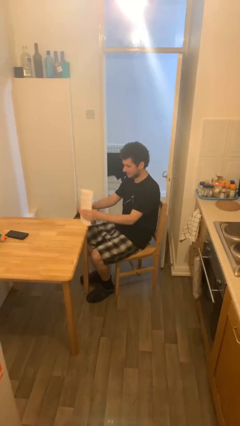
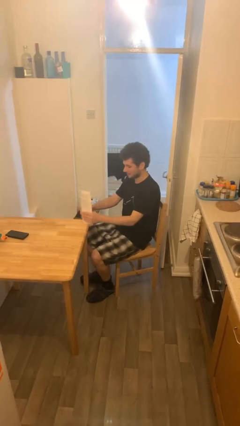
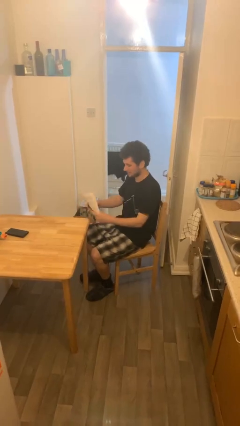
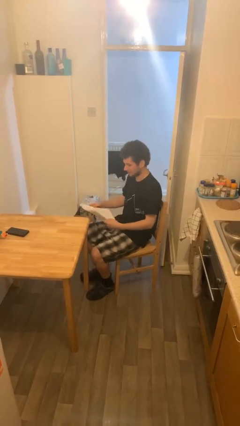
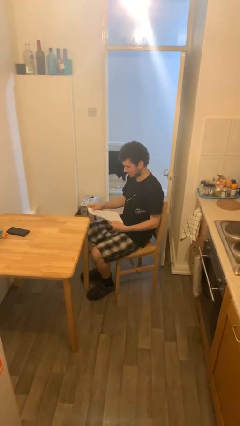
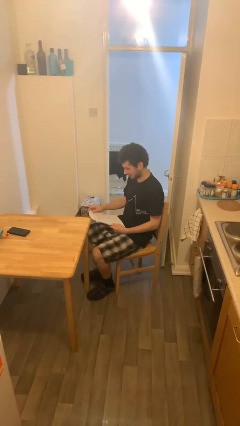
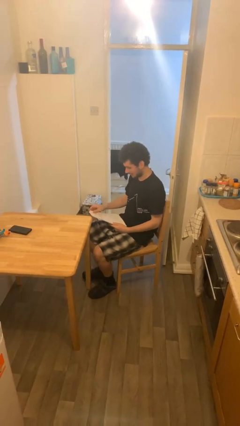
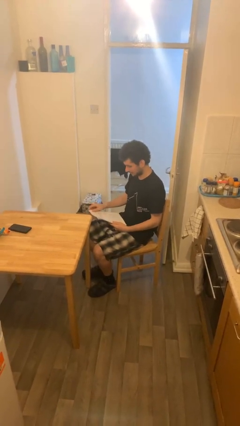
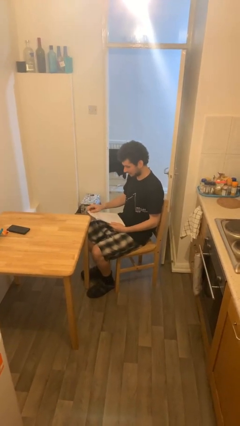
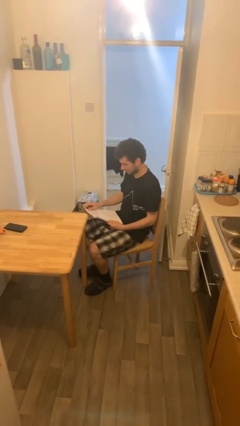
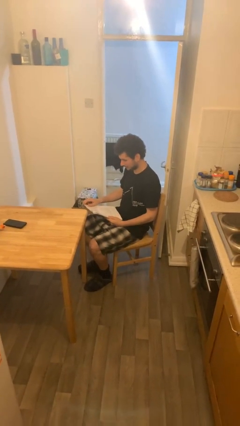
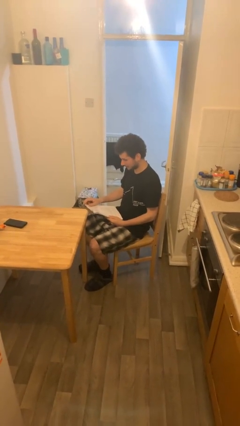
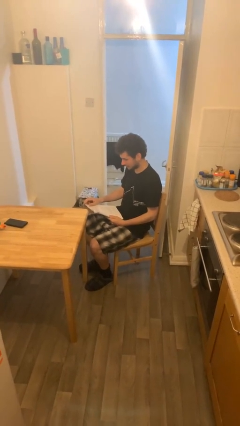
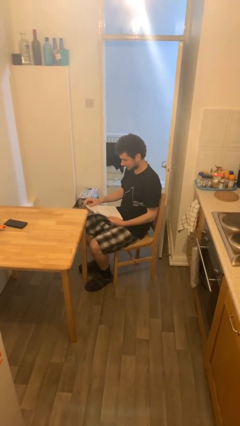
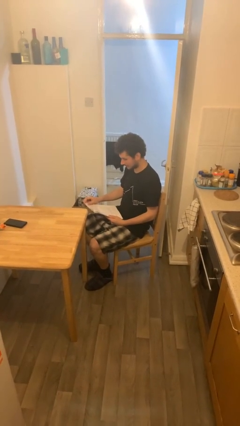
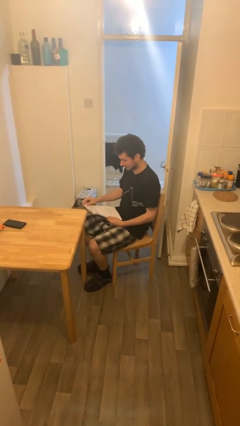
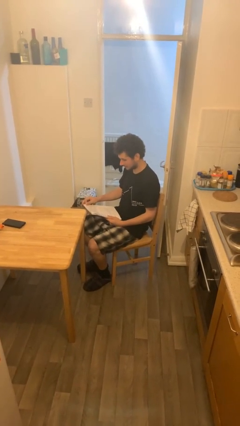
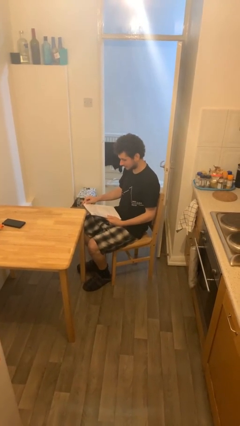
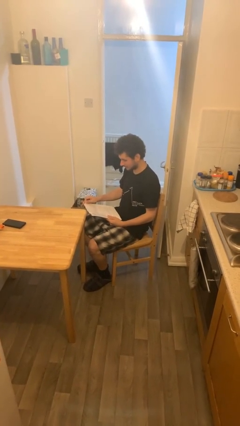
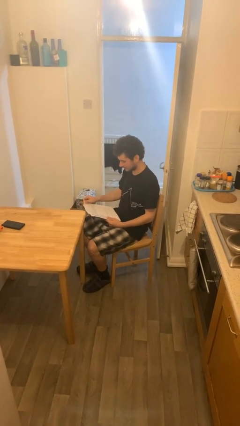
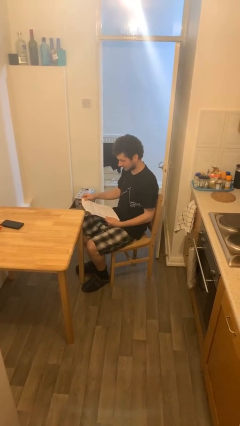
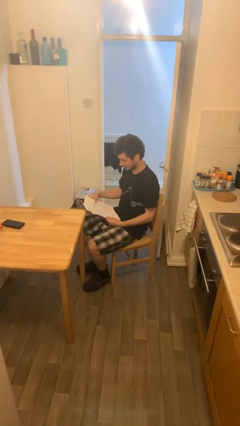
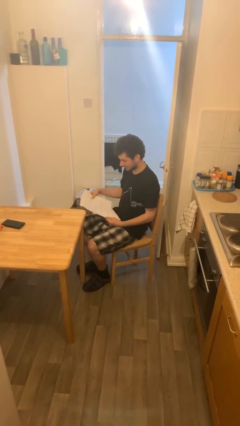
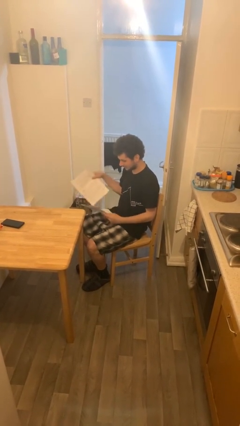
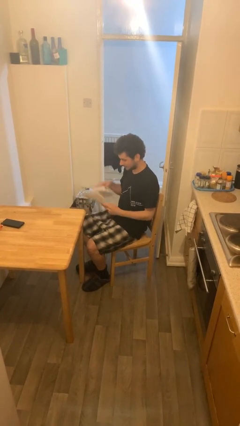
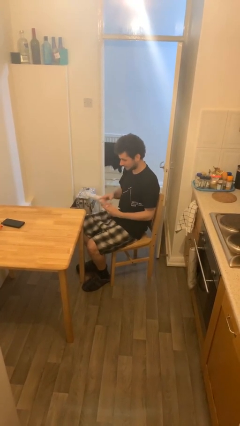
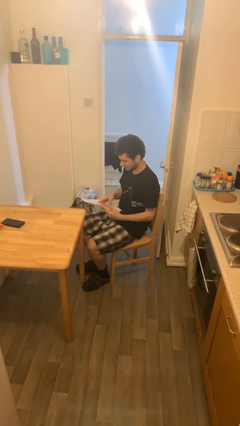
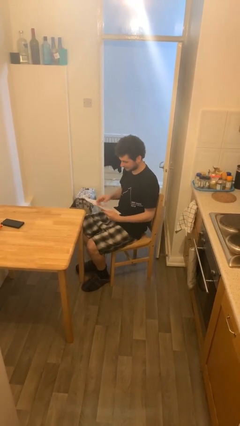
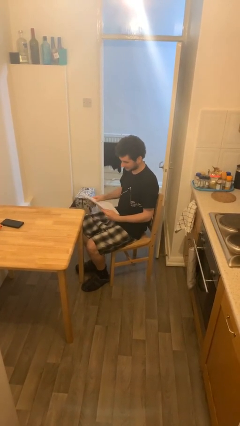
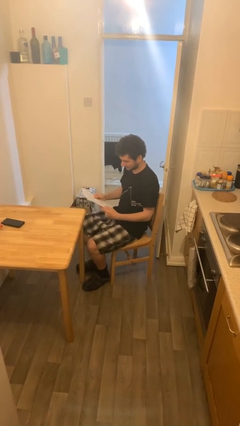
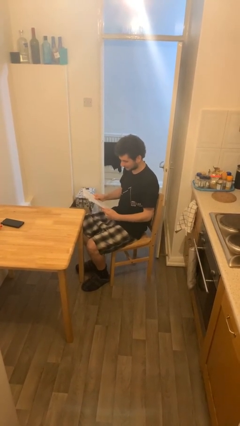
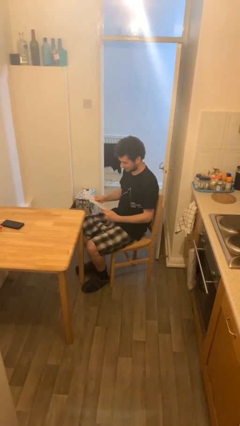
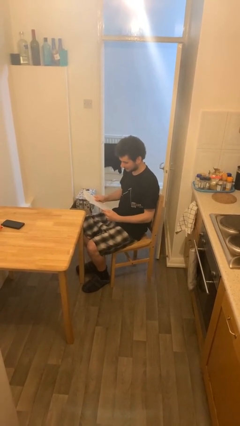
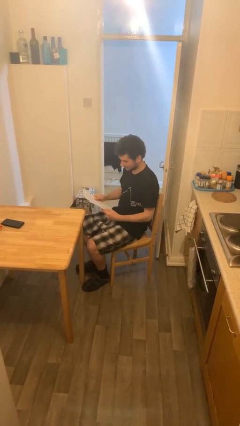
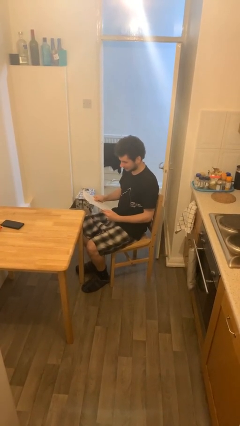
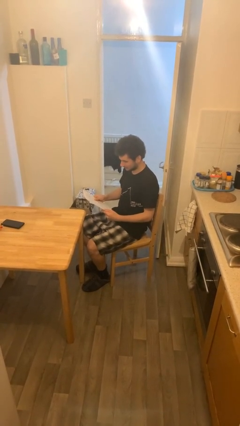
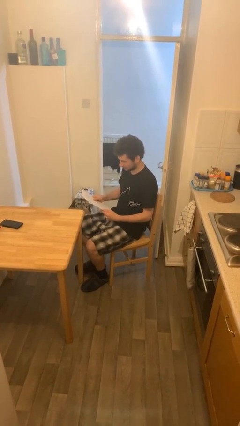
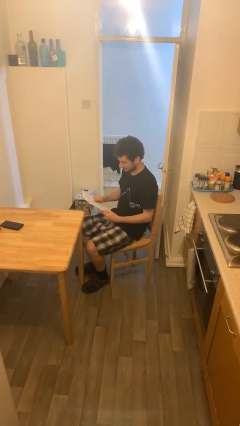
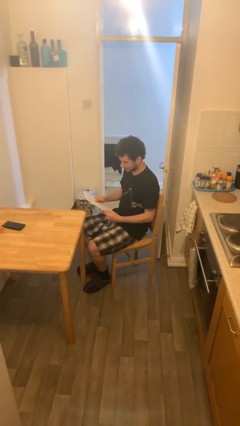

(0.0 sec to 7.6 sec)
person reads document

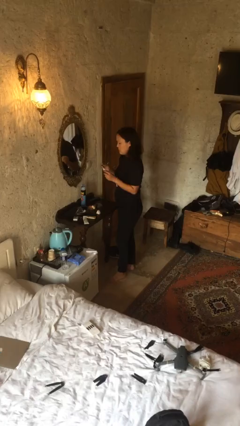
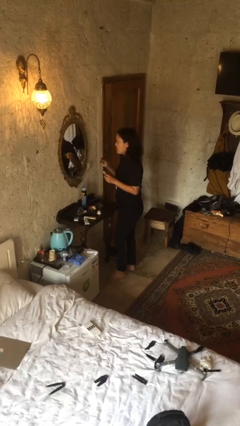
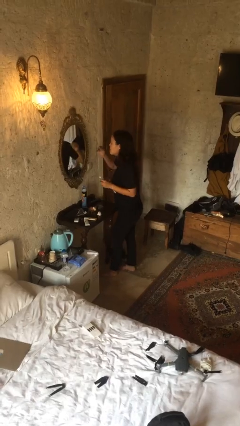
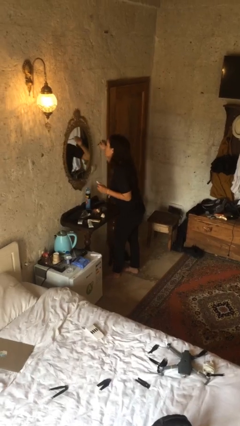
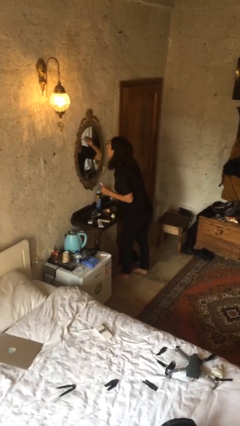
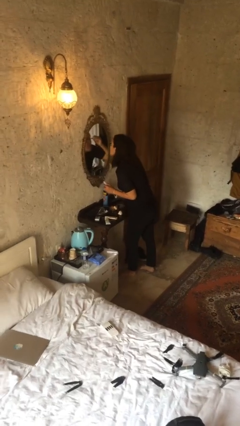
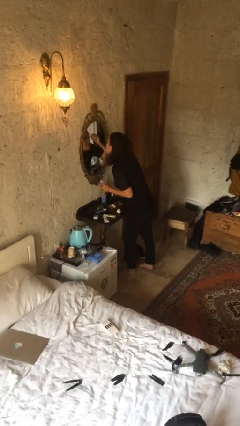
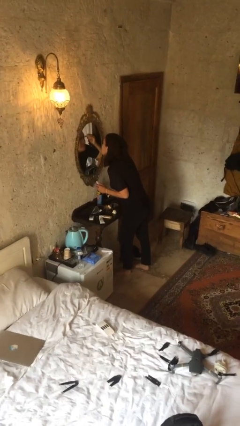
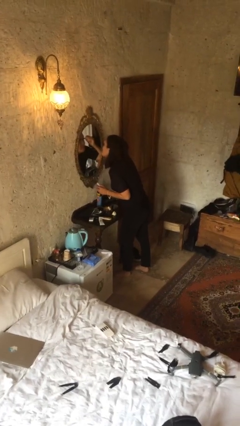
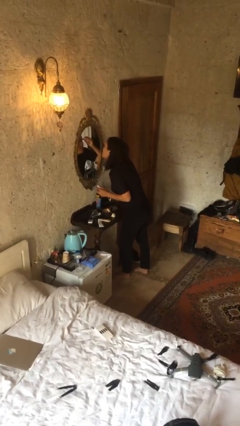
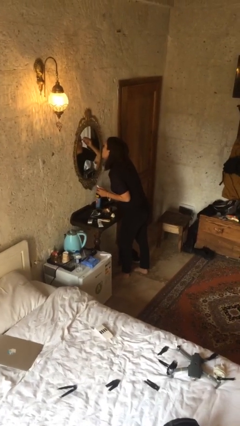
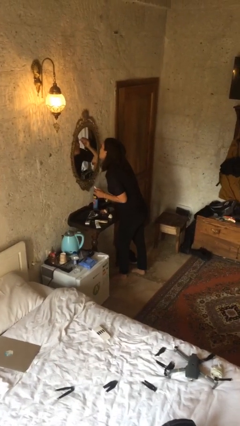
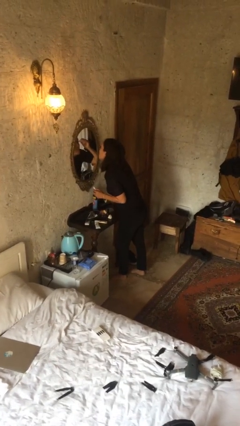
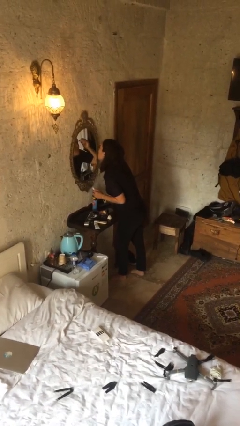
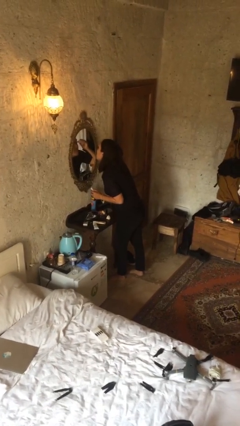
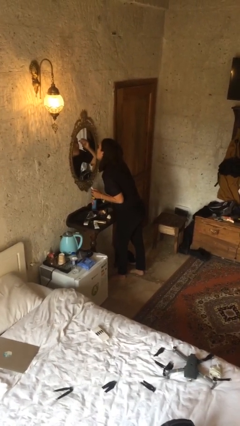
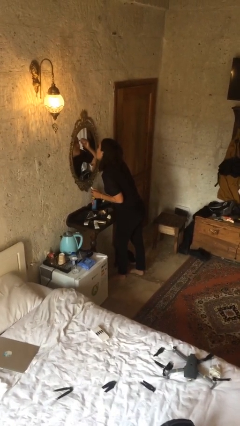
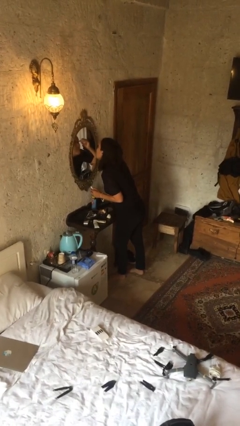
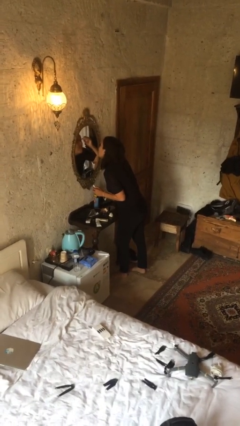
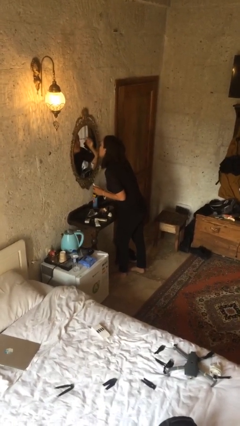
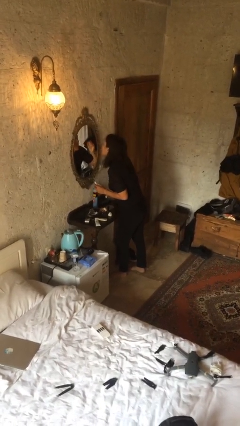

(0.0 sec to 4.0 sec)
person applies eye makeup

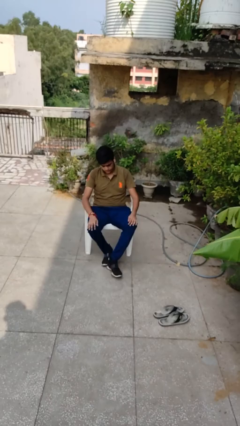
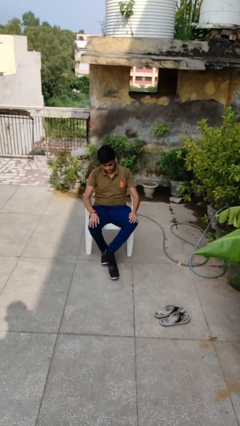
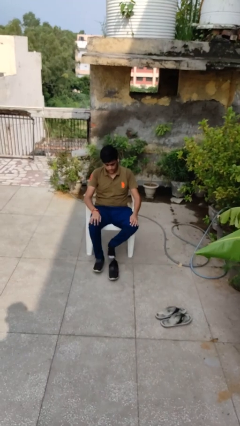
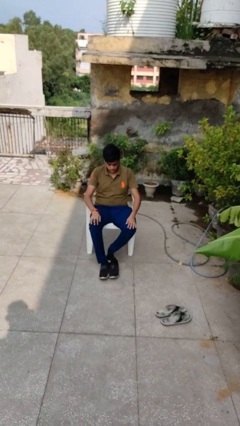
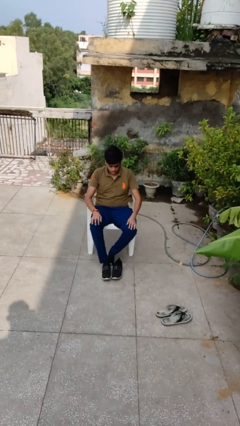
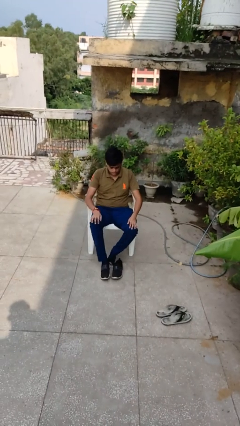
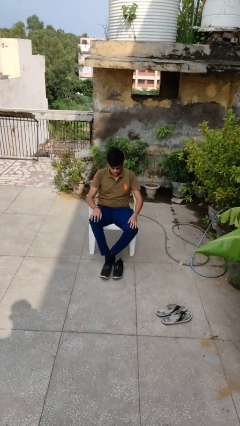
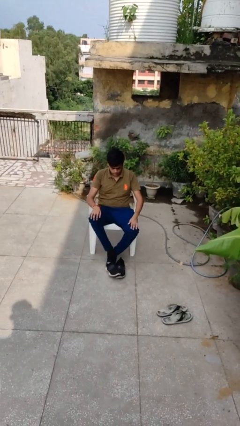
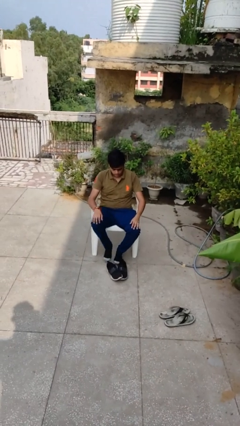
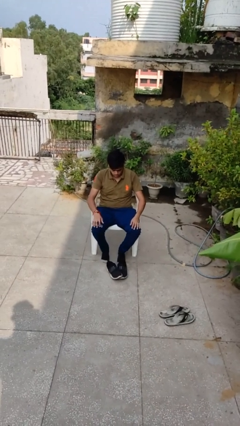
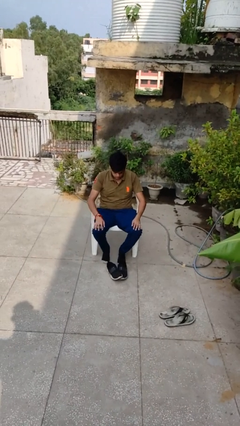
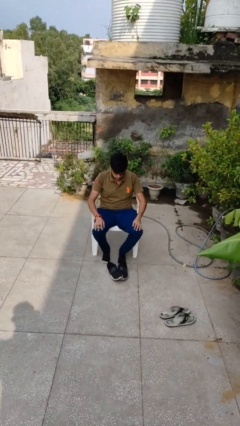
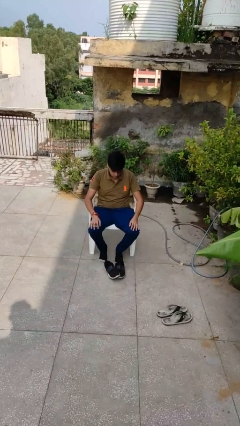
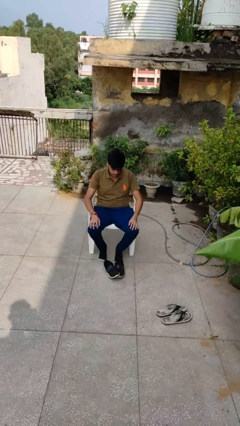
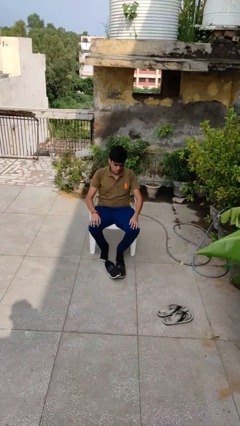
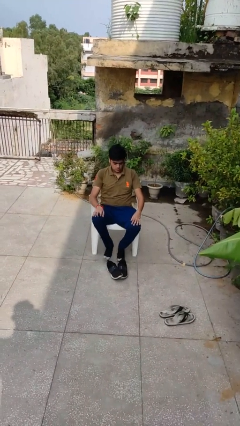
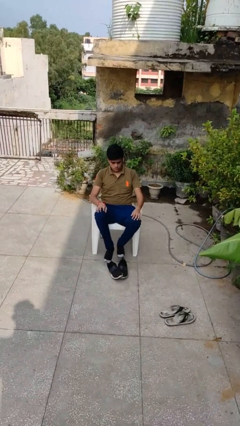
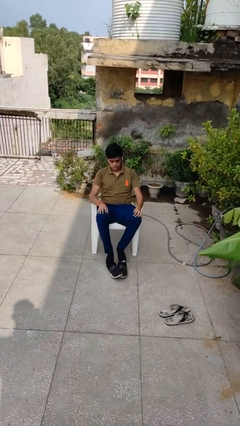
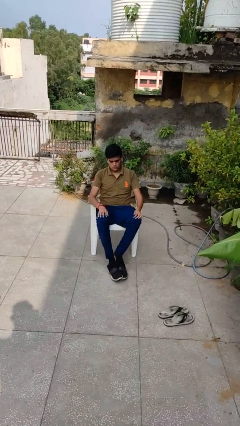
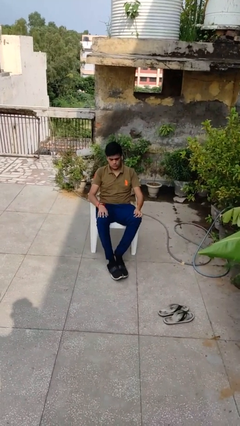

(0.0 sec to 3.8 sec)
person takes off shoes

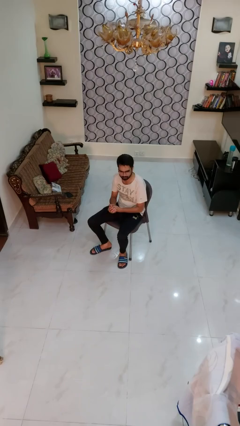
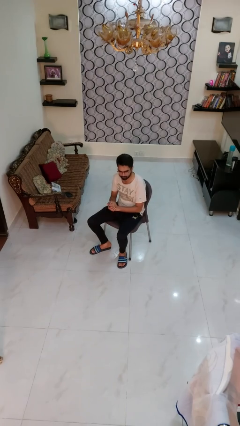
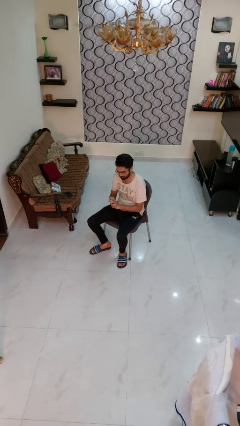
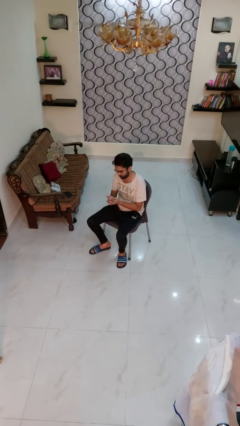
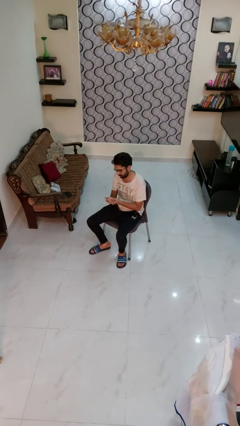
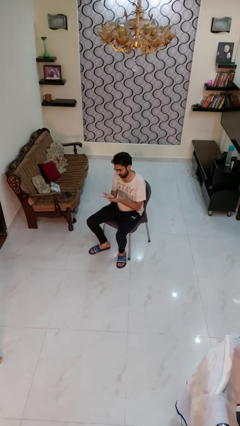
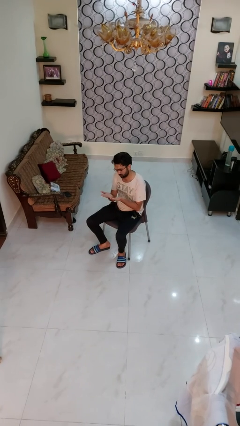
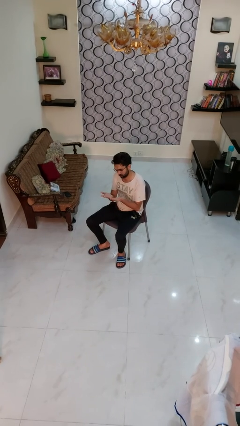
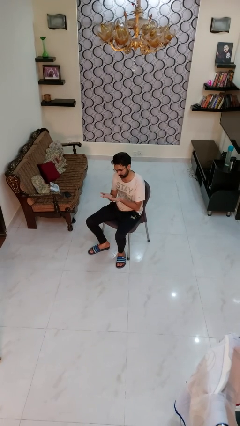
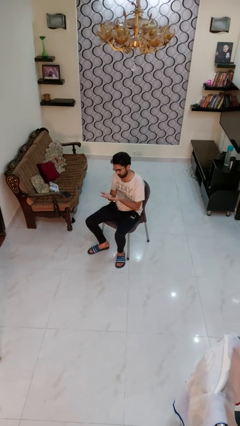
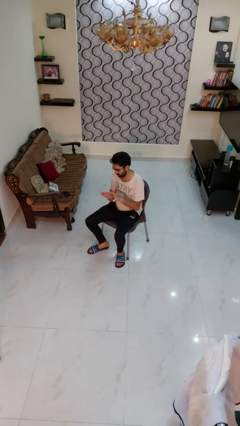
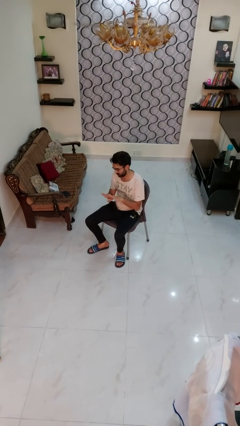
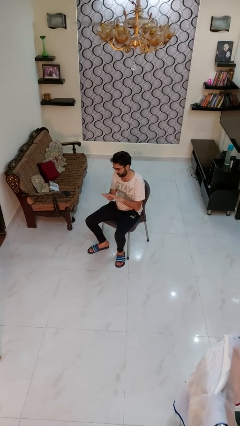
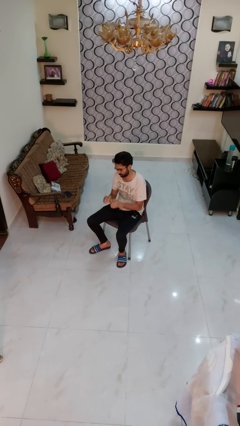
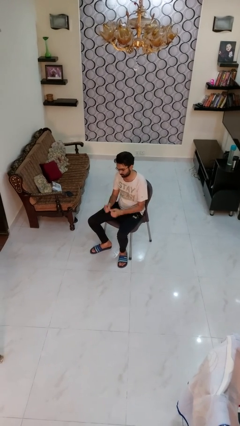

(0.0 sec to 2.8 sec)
person looks at hands in lap
